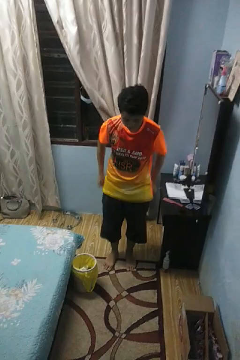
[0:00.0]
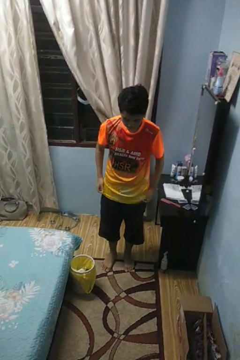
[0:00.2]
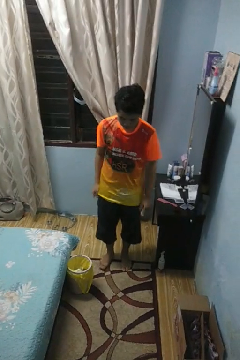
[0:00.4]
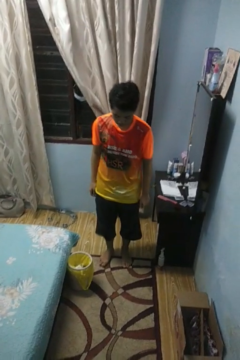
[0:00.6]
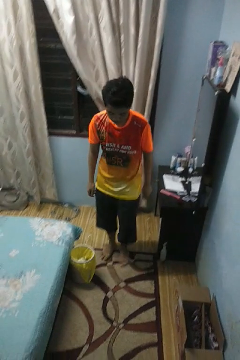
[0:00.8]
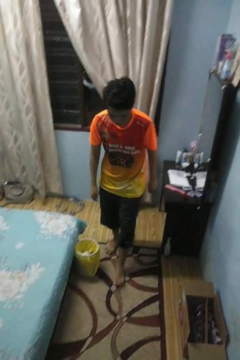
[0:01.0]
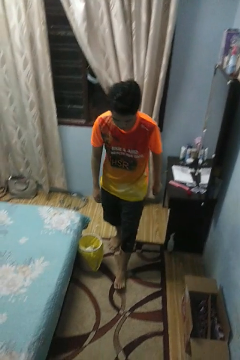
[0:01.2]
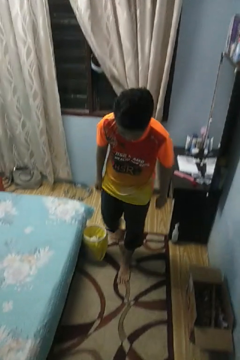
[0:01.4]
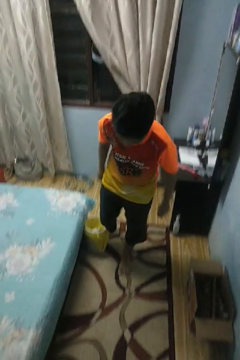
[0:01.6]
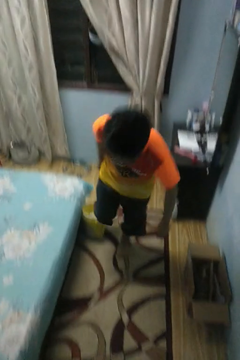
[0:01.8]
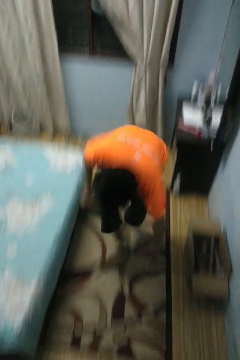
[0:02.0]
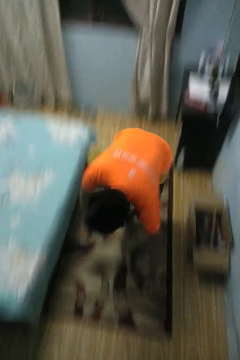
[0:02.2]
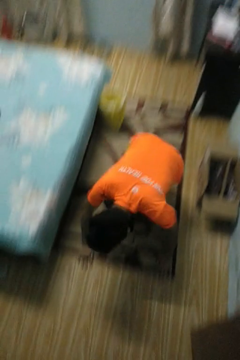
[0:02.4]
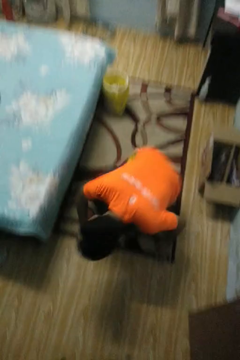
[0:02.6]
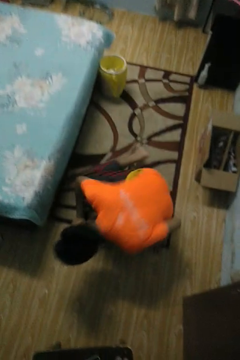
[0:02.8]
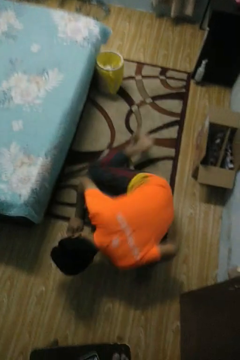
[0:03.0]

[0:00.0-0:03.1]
person trips on object on floor

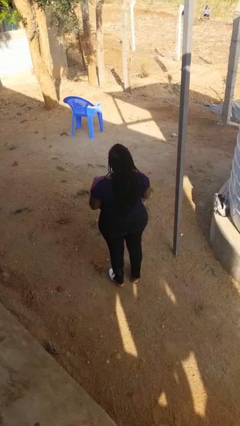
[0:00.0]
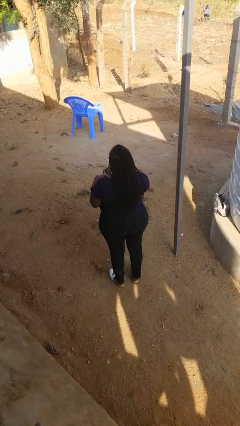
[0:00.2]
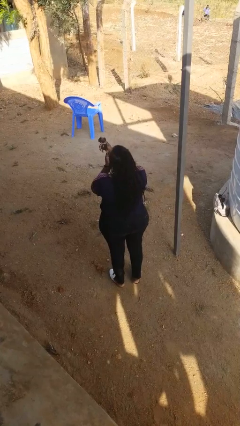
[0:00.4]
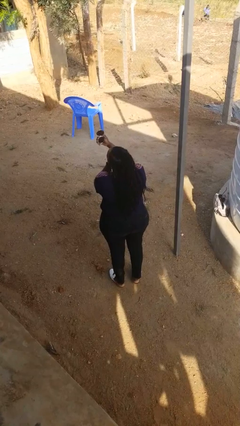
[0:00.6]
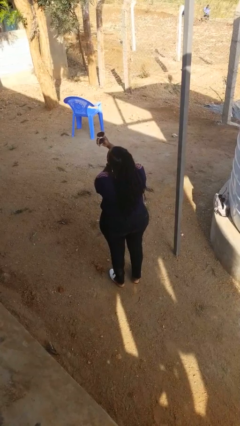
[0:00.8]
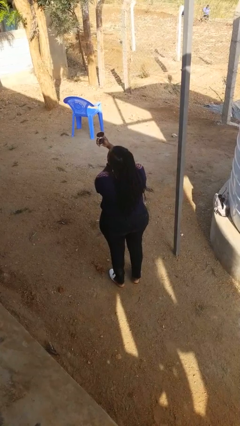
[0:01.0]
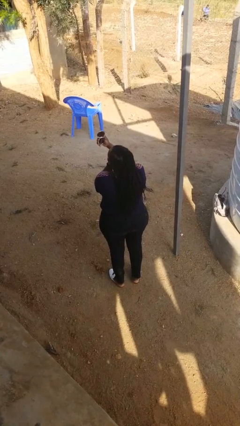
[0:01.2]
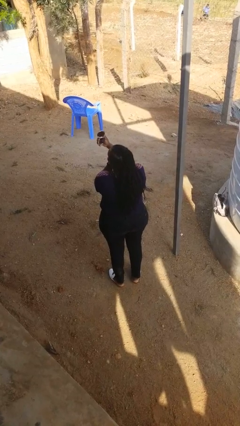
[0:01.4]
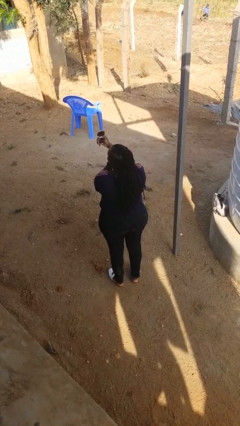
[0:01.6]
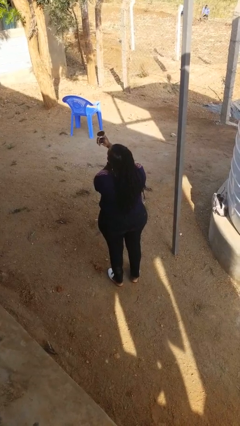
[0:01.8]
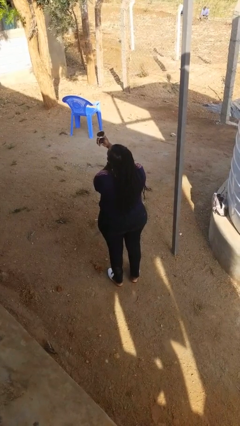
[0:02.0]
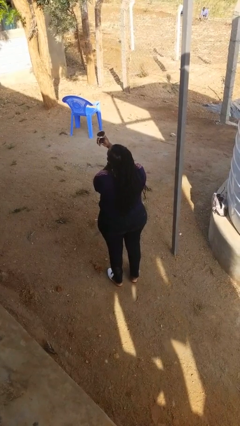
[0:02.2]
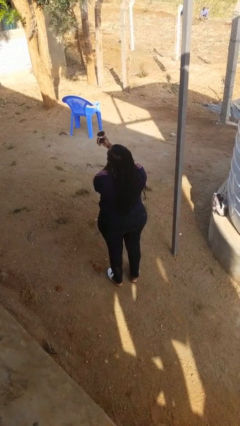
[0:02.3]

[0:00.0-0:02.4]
person applies eye makeup

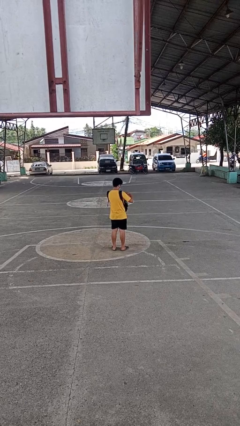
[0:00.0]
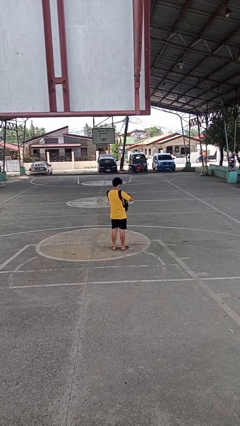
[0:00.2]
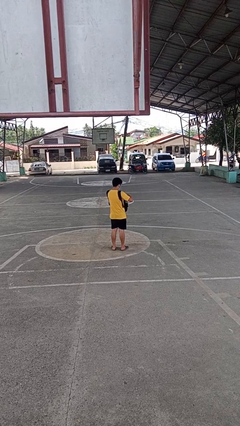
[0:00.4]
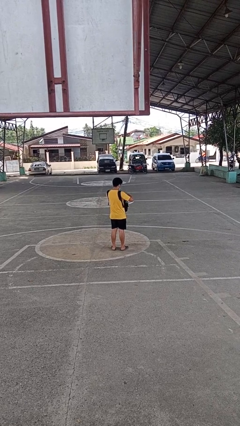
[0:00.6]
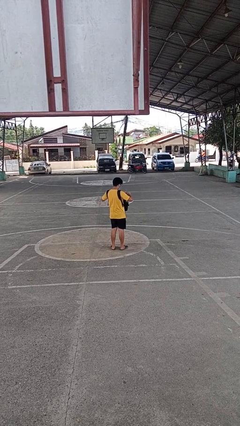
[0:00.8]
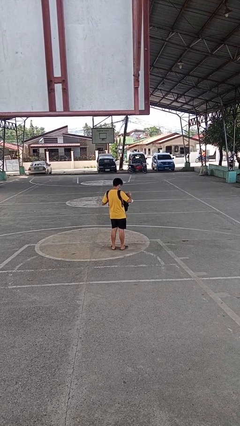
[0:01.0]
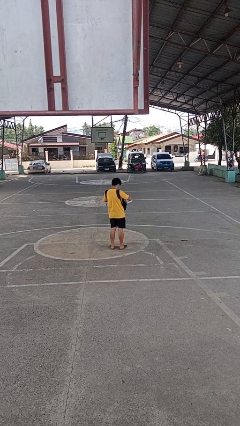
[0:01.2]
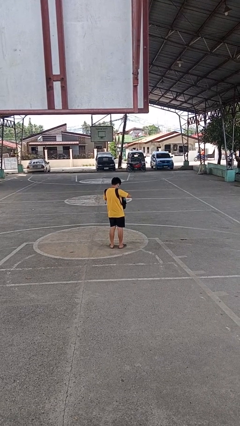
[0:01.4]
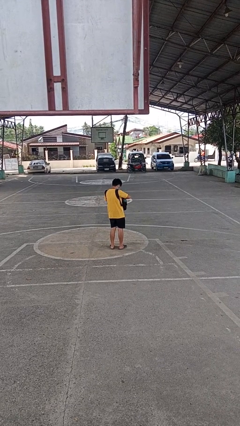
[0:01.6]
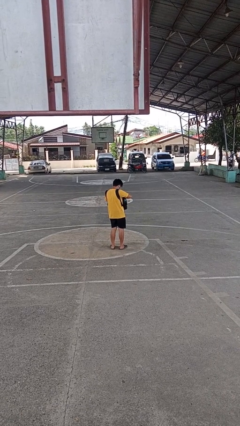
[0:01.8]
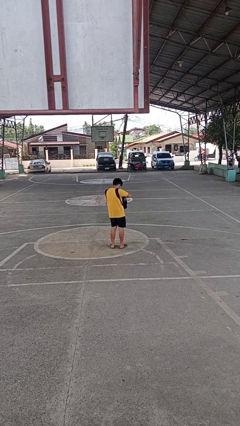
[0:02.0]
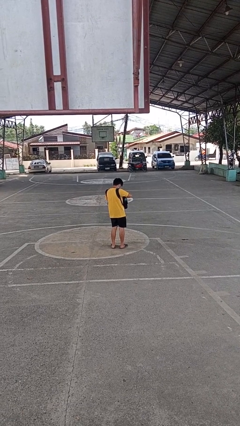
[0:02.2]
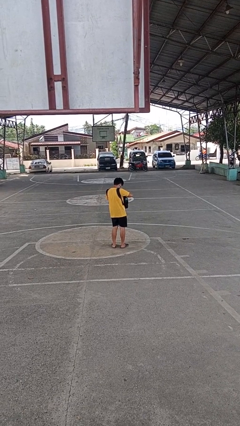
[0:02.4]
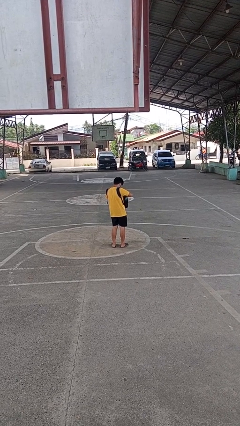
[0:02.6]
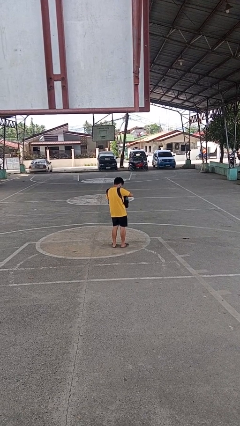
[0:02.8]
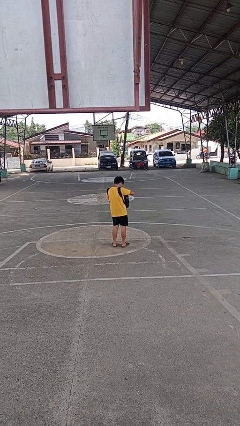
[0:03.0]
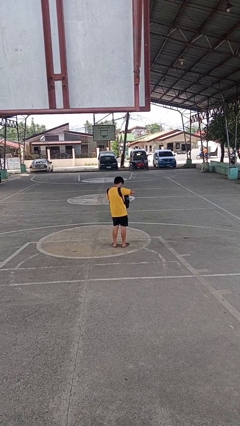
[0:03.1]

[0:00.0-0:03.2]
person searches in backpack

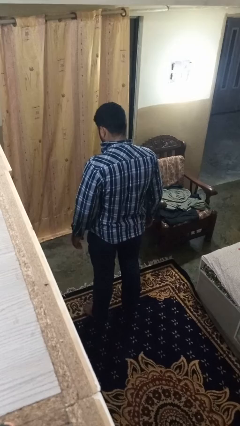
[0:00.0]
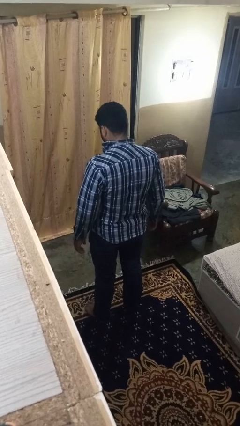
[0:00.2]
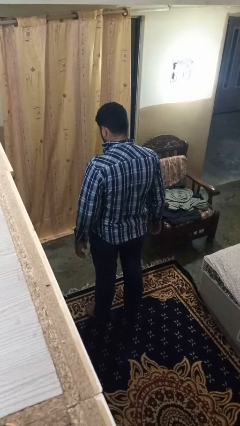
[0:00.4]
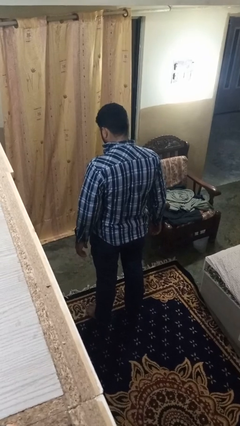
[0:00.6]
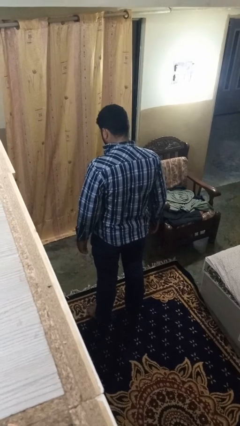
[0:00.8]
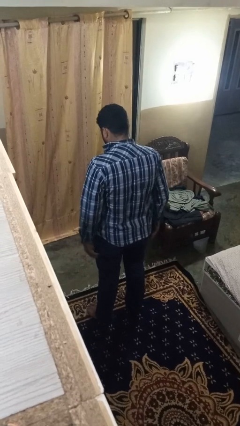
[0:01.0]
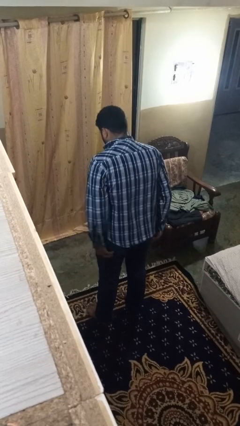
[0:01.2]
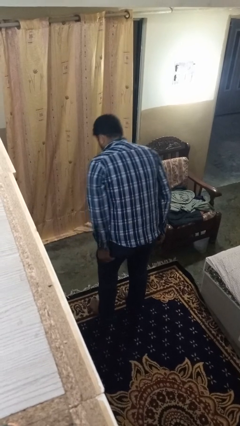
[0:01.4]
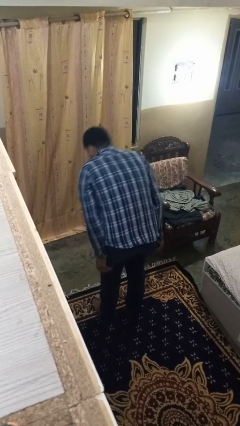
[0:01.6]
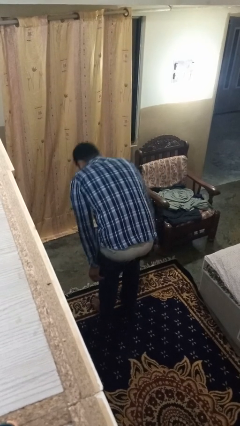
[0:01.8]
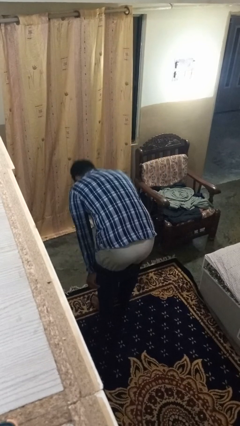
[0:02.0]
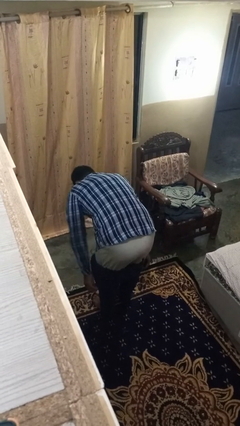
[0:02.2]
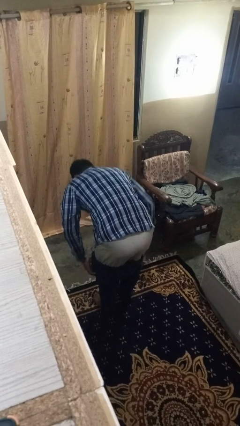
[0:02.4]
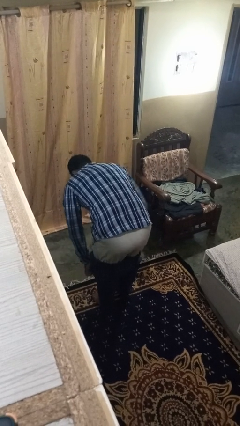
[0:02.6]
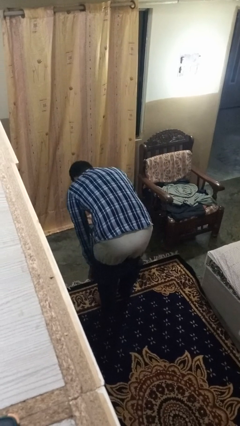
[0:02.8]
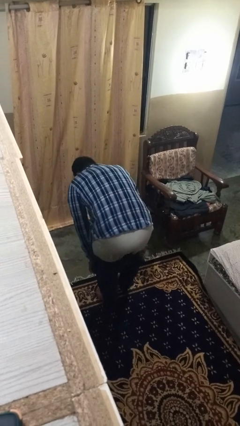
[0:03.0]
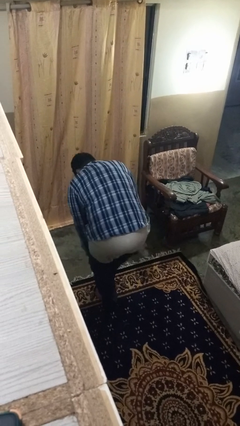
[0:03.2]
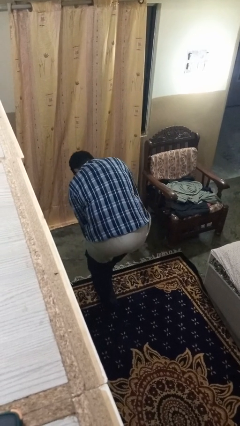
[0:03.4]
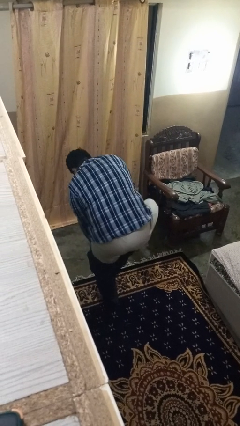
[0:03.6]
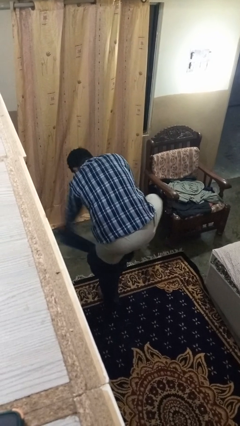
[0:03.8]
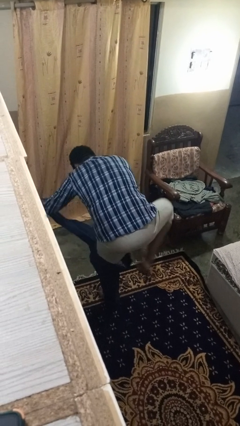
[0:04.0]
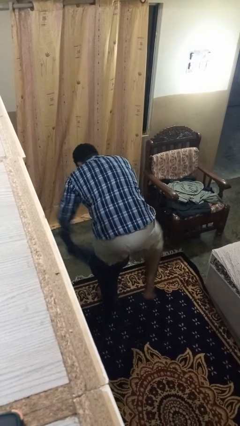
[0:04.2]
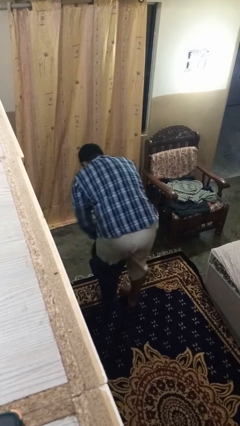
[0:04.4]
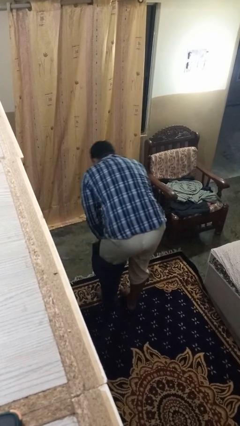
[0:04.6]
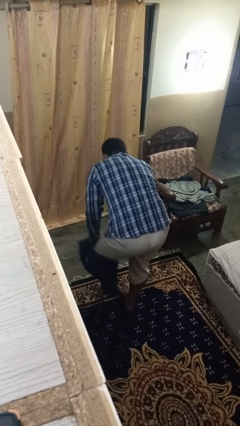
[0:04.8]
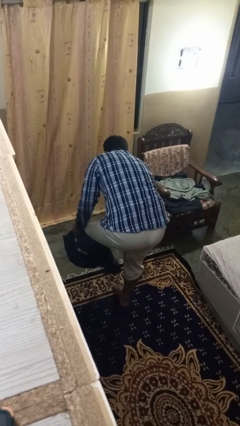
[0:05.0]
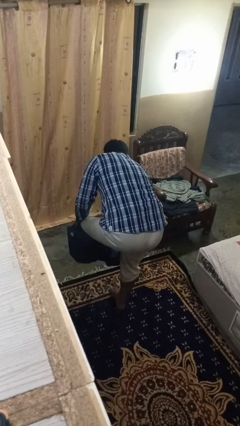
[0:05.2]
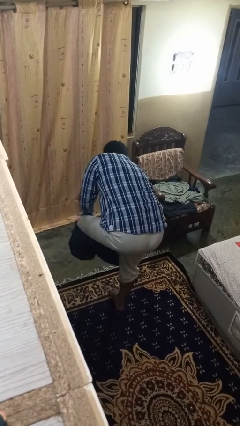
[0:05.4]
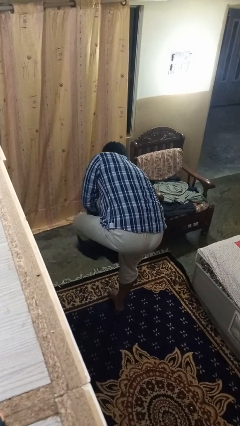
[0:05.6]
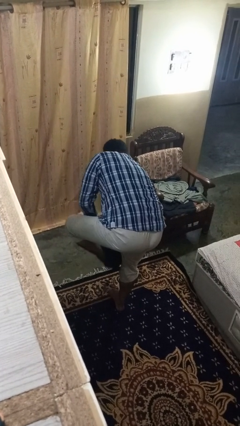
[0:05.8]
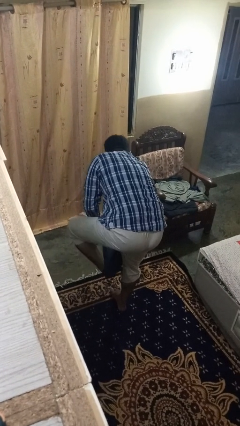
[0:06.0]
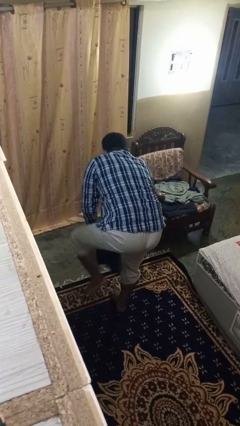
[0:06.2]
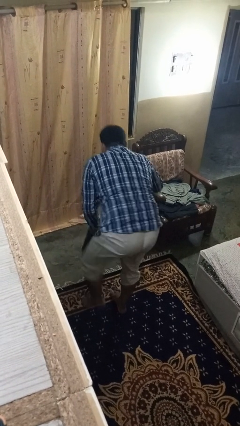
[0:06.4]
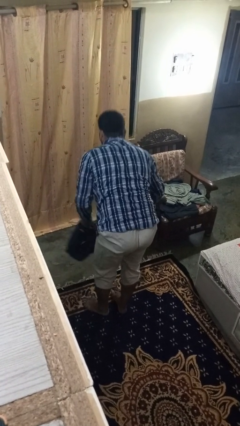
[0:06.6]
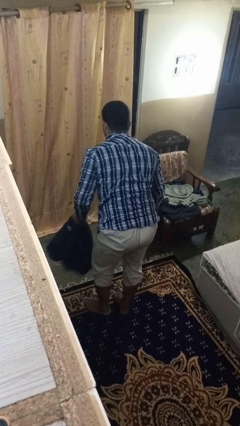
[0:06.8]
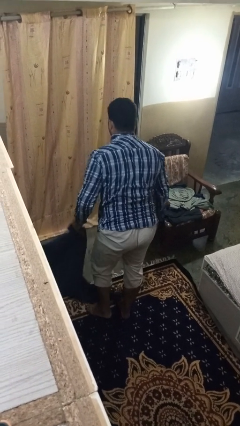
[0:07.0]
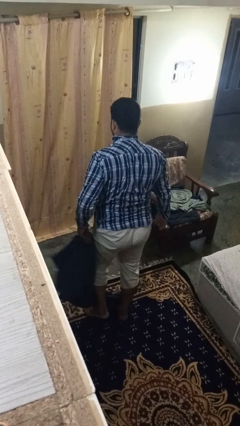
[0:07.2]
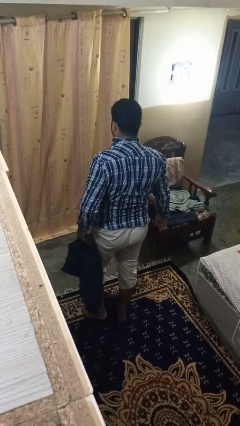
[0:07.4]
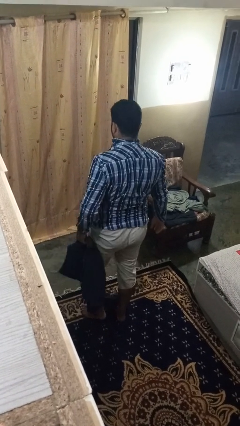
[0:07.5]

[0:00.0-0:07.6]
person takes off pants

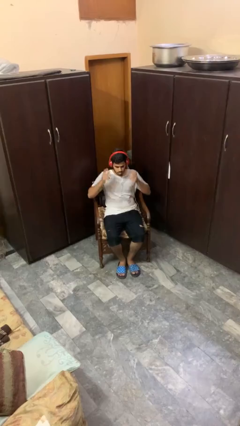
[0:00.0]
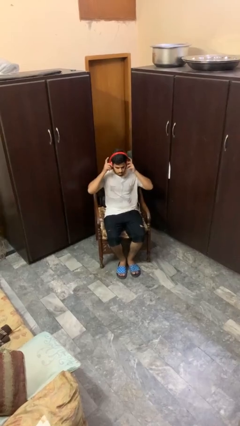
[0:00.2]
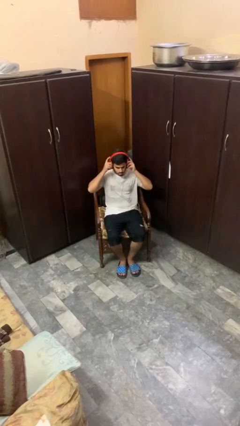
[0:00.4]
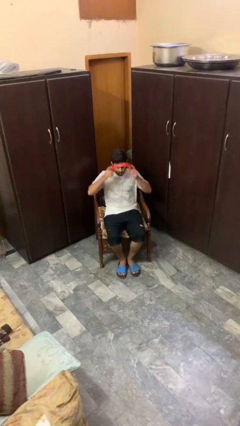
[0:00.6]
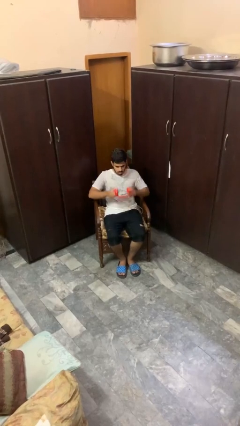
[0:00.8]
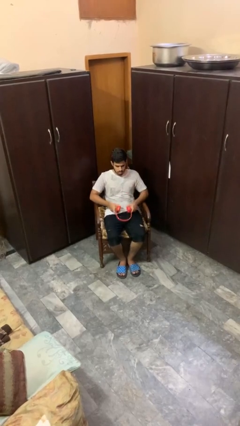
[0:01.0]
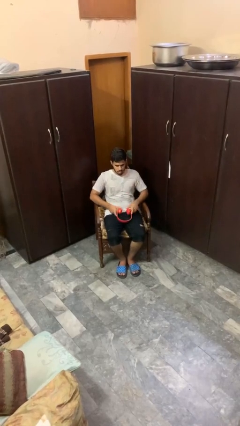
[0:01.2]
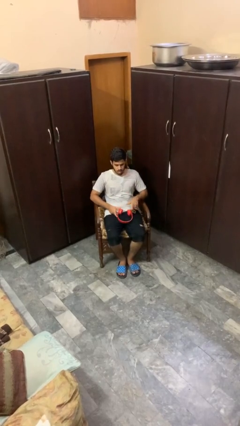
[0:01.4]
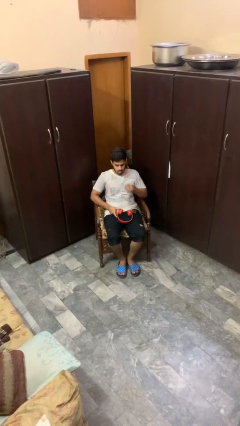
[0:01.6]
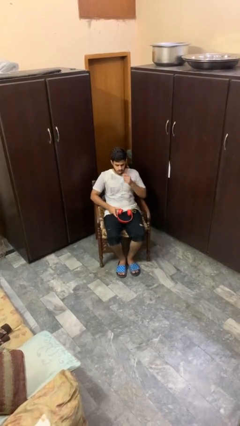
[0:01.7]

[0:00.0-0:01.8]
person takes off headphones
